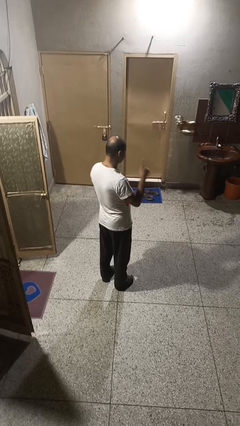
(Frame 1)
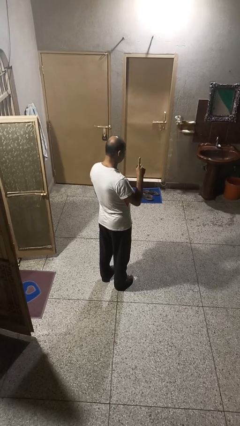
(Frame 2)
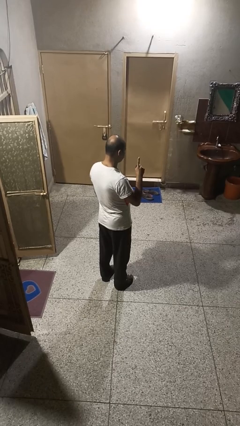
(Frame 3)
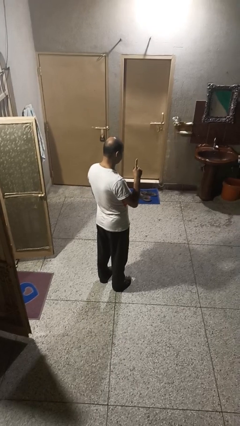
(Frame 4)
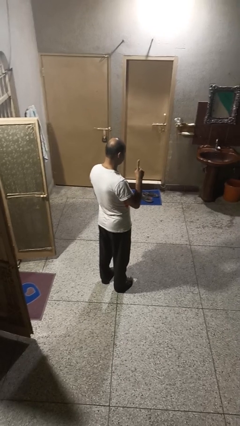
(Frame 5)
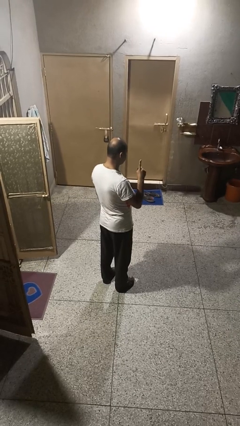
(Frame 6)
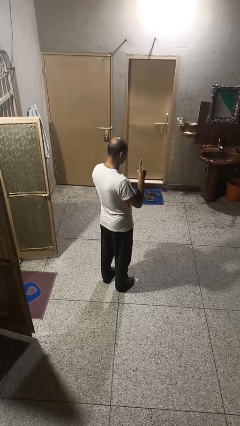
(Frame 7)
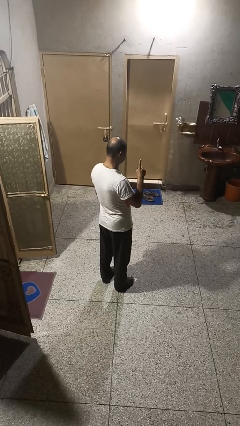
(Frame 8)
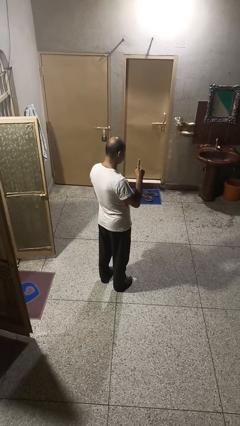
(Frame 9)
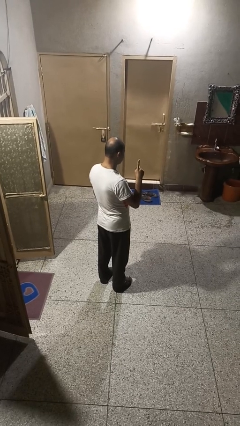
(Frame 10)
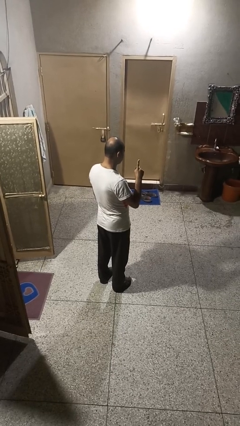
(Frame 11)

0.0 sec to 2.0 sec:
person gestures number one

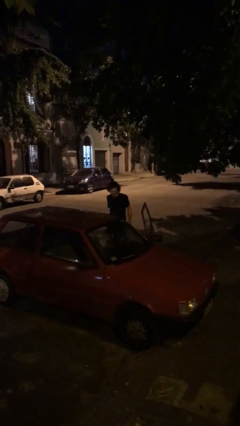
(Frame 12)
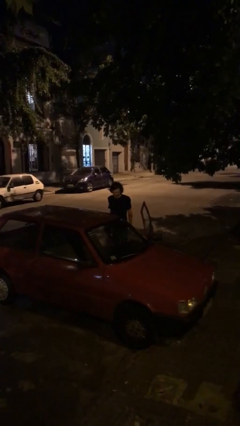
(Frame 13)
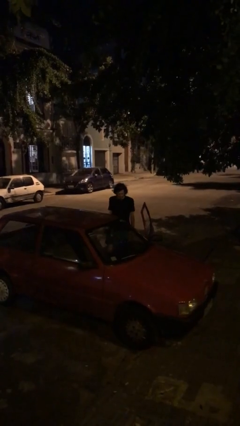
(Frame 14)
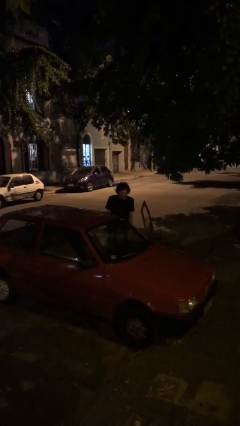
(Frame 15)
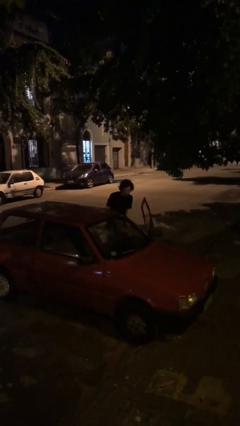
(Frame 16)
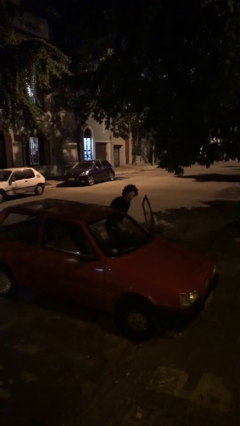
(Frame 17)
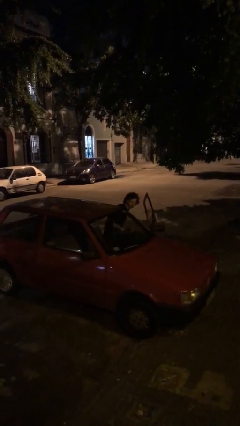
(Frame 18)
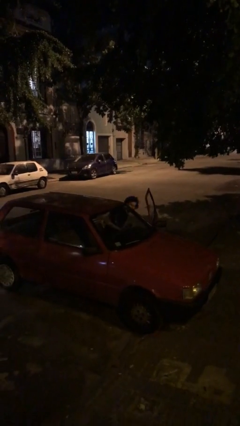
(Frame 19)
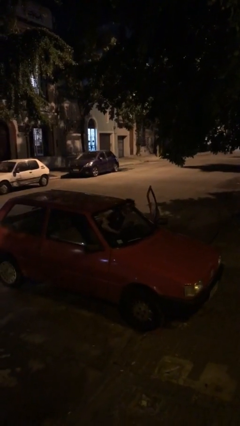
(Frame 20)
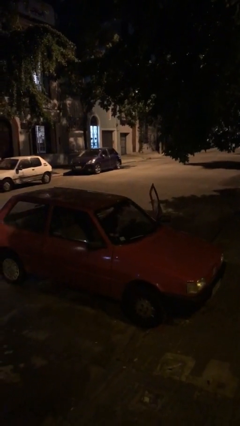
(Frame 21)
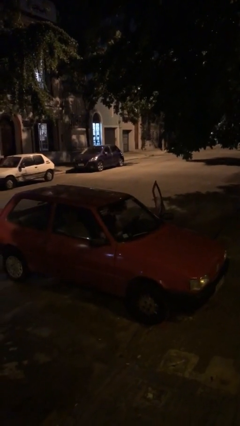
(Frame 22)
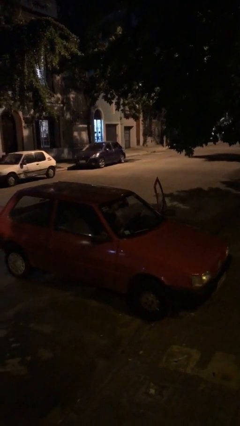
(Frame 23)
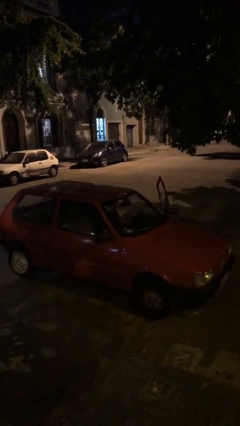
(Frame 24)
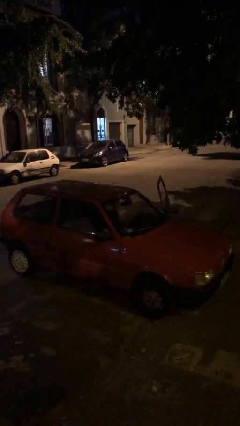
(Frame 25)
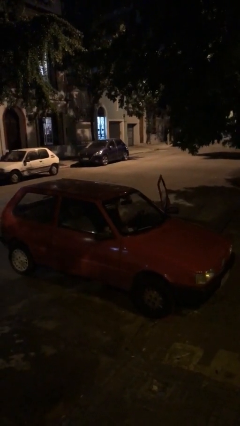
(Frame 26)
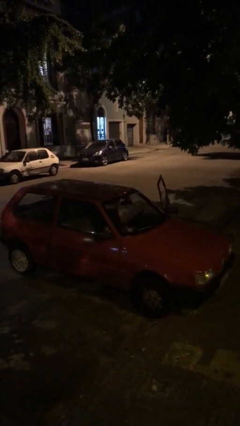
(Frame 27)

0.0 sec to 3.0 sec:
person enters car

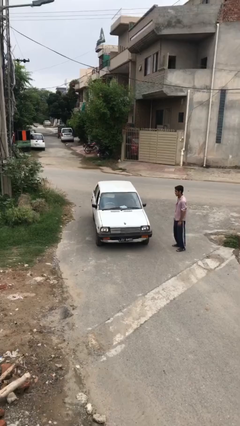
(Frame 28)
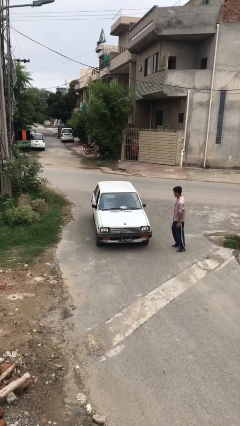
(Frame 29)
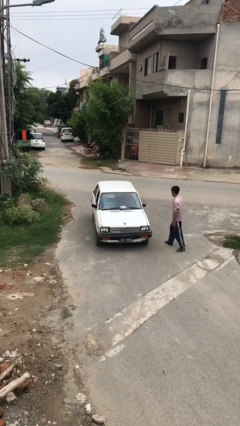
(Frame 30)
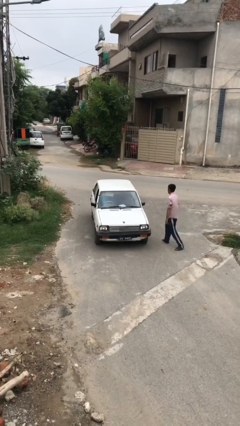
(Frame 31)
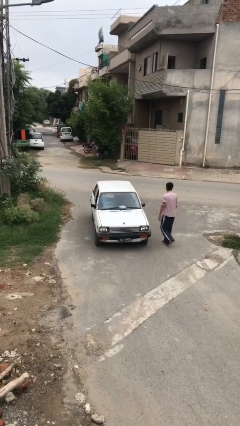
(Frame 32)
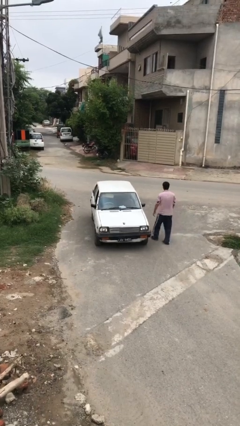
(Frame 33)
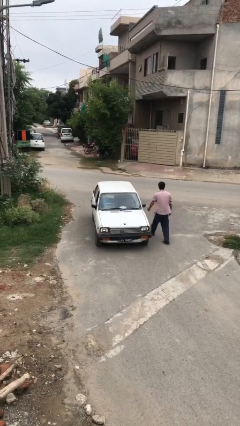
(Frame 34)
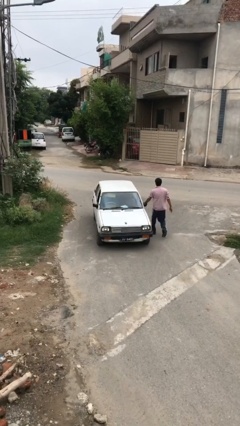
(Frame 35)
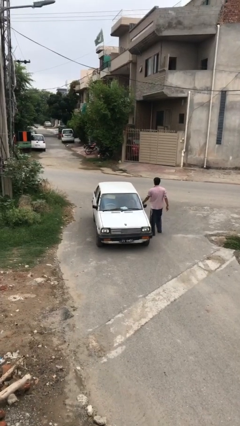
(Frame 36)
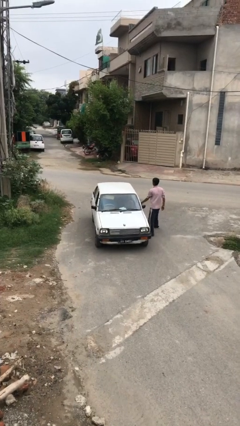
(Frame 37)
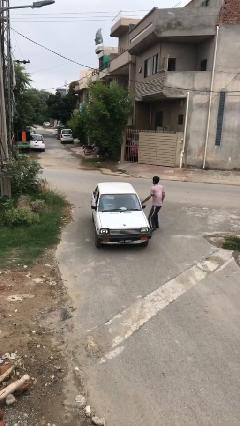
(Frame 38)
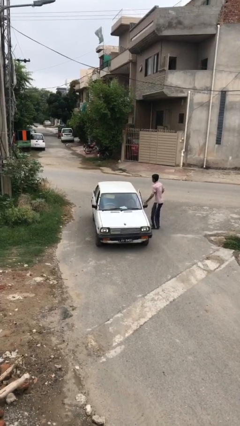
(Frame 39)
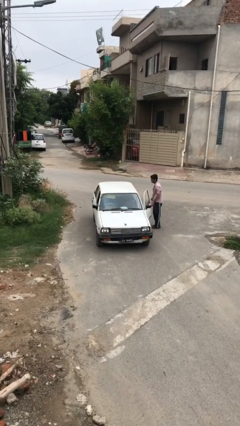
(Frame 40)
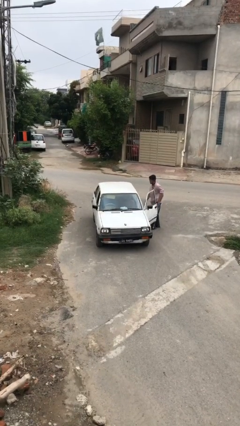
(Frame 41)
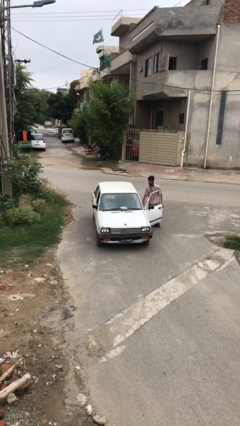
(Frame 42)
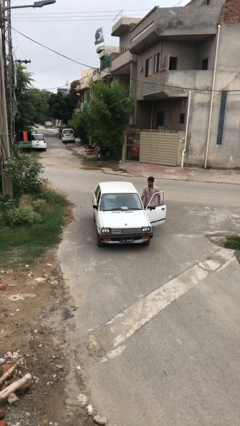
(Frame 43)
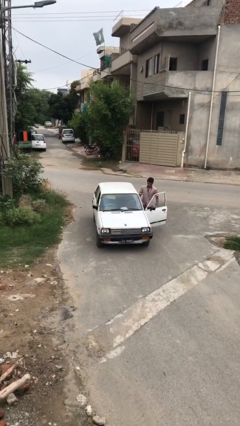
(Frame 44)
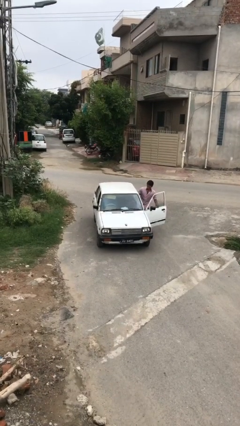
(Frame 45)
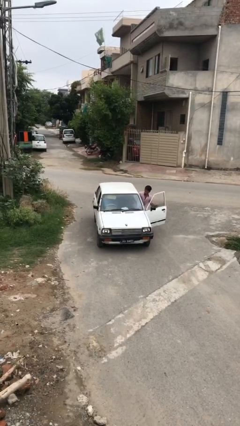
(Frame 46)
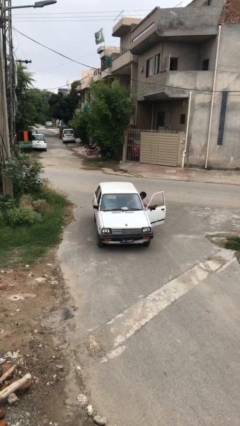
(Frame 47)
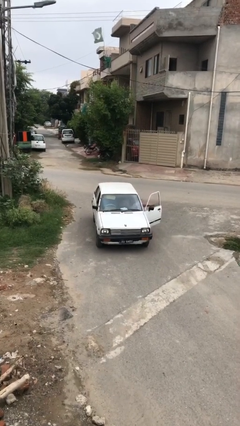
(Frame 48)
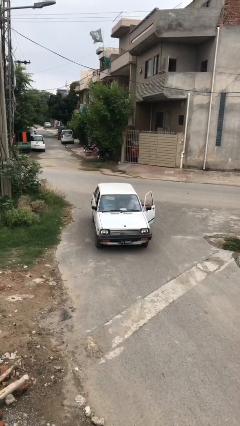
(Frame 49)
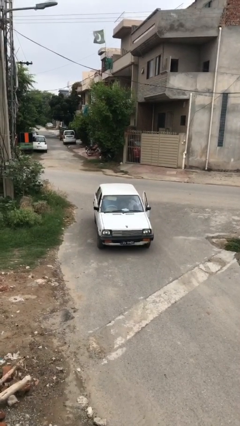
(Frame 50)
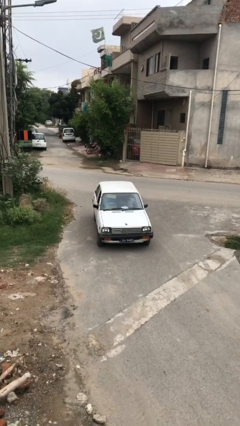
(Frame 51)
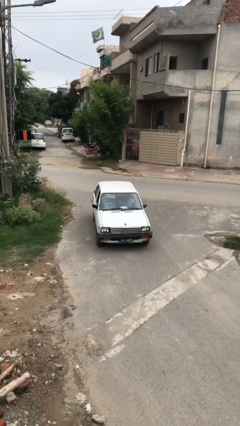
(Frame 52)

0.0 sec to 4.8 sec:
car picks up person

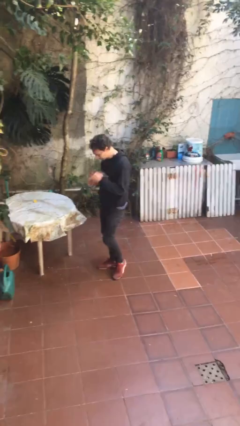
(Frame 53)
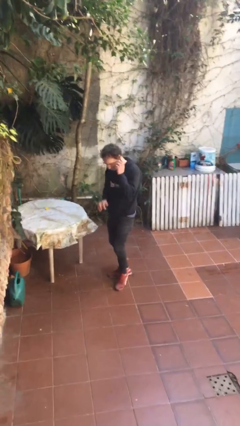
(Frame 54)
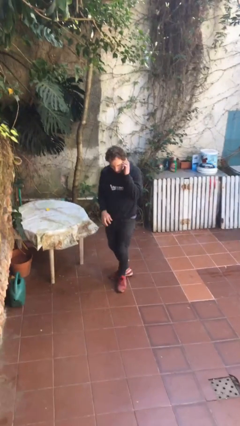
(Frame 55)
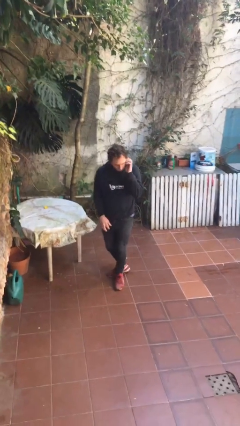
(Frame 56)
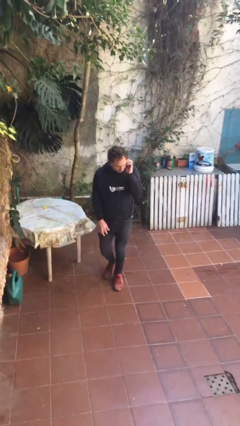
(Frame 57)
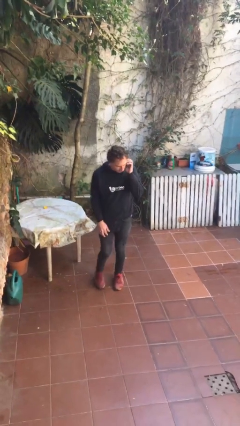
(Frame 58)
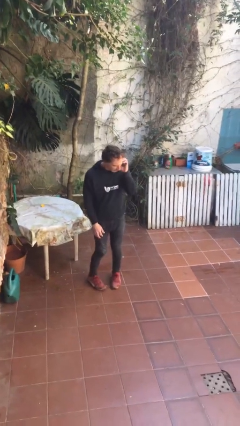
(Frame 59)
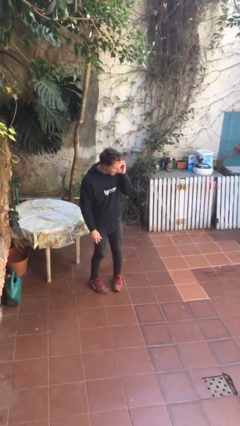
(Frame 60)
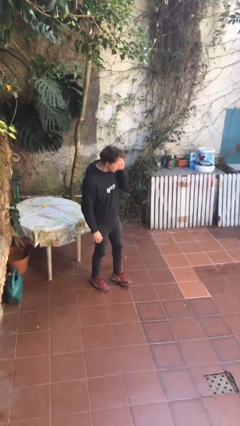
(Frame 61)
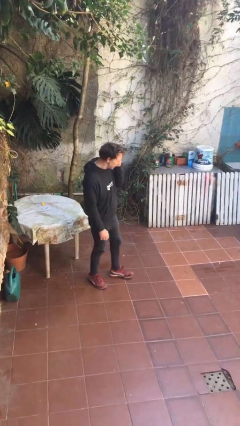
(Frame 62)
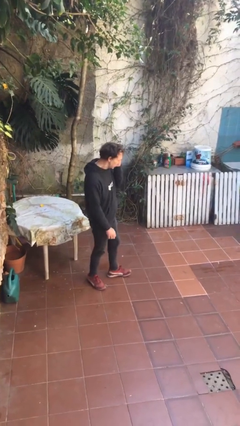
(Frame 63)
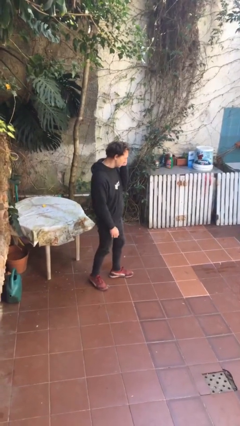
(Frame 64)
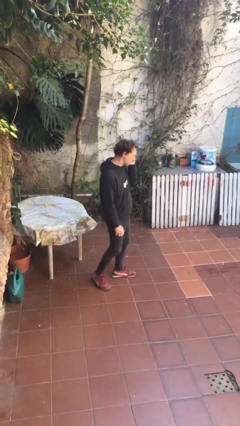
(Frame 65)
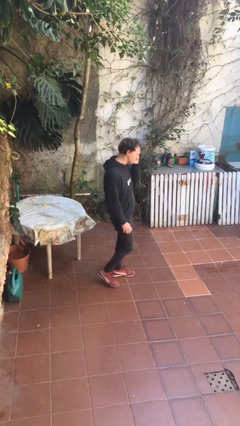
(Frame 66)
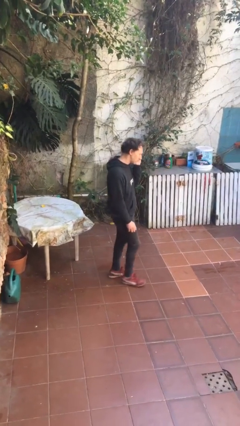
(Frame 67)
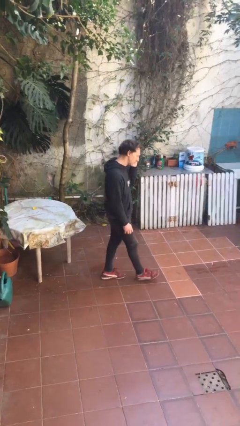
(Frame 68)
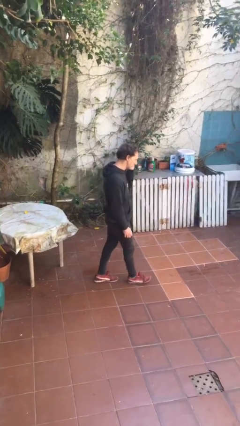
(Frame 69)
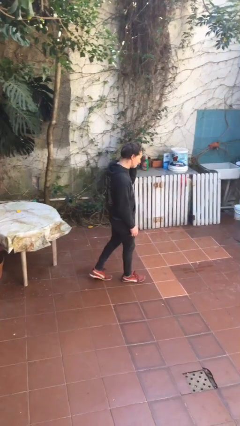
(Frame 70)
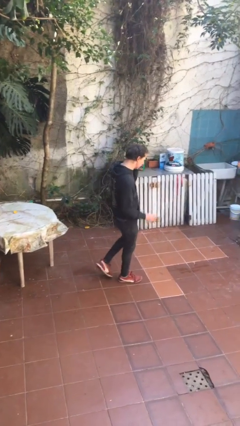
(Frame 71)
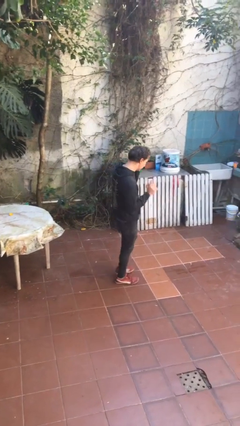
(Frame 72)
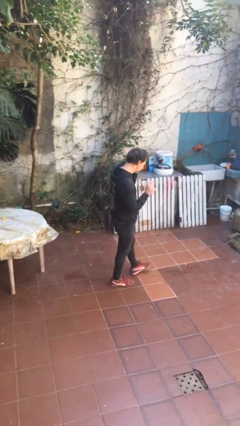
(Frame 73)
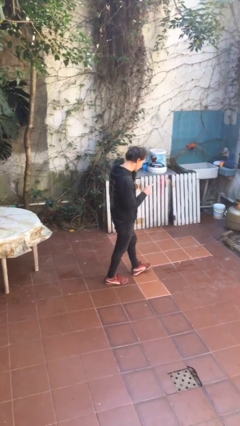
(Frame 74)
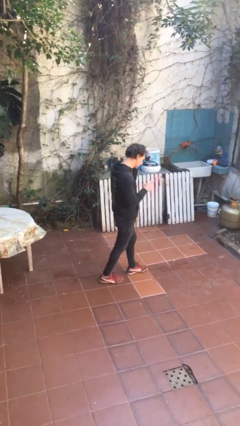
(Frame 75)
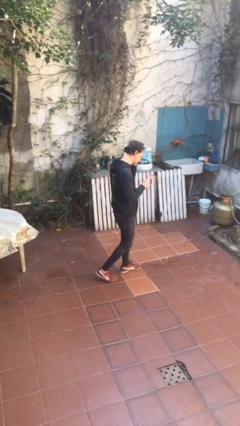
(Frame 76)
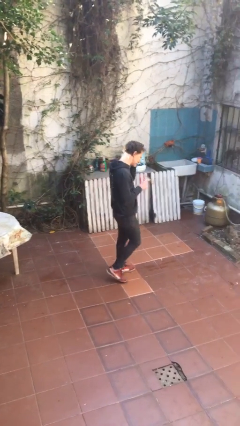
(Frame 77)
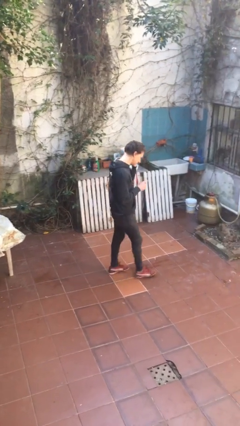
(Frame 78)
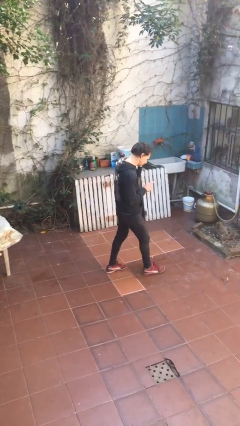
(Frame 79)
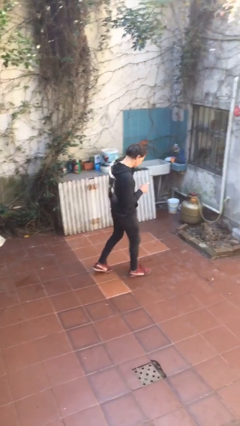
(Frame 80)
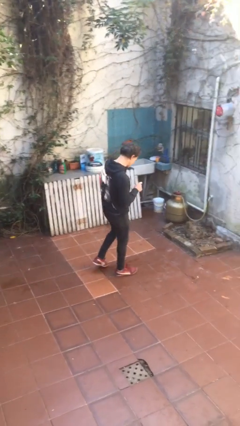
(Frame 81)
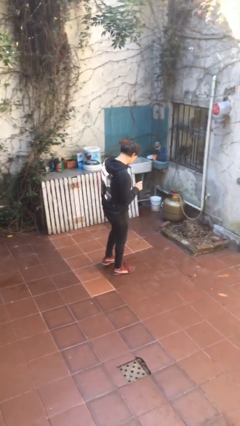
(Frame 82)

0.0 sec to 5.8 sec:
person talks on phone

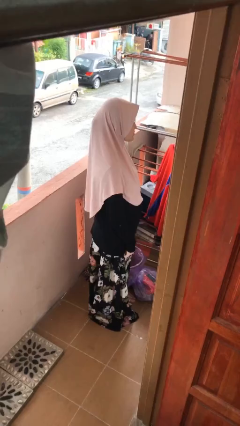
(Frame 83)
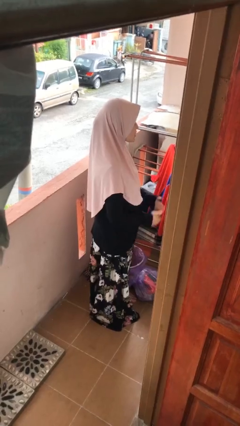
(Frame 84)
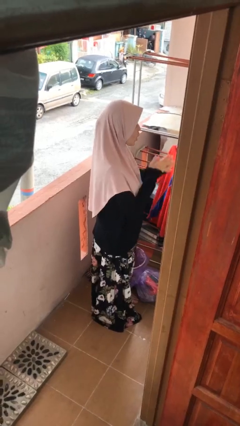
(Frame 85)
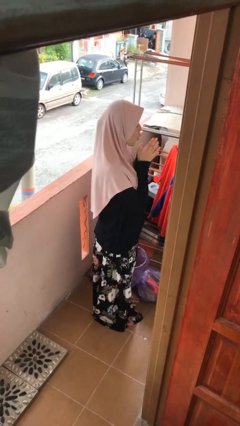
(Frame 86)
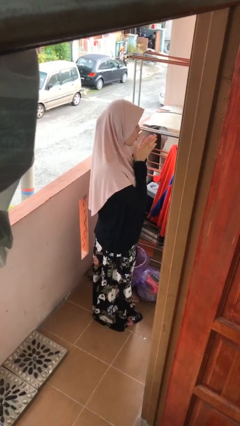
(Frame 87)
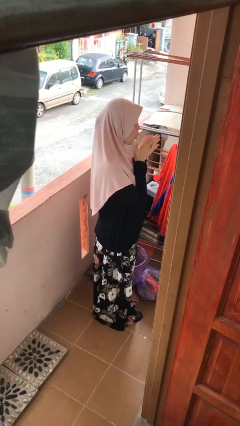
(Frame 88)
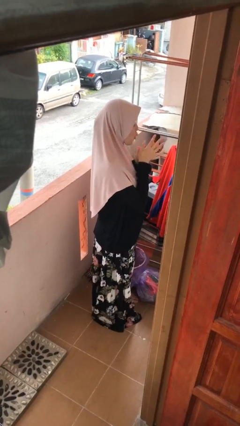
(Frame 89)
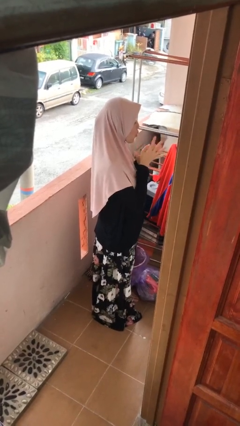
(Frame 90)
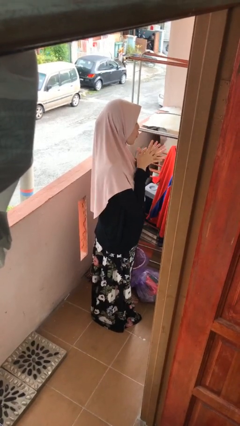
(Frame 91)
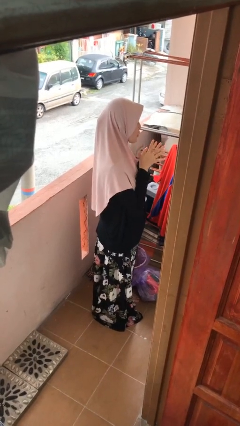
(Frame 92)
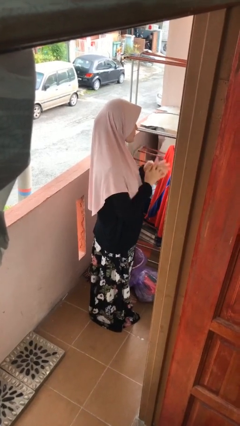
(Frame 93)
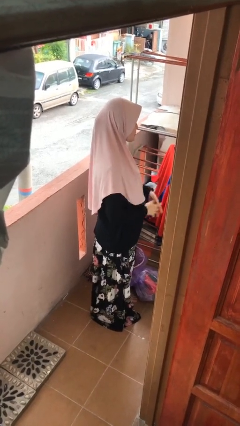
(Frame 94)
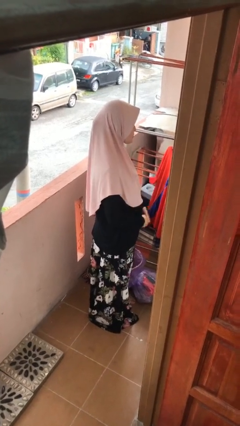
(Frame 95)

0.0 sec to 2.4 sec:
person blows into hands
